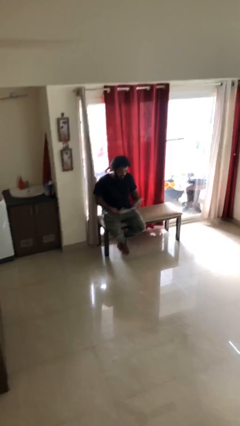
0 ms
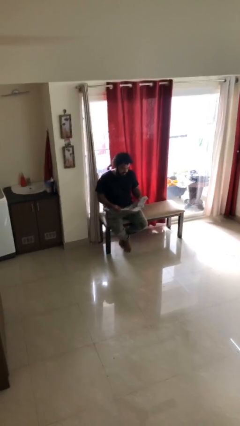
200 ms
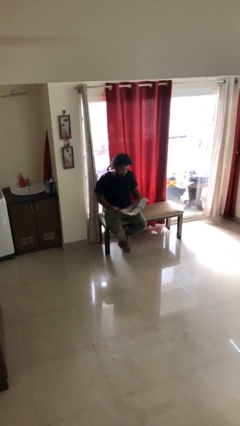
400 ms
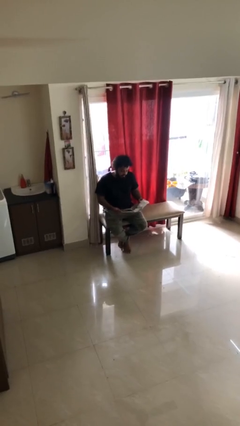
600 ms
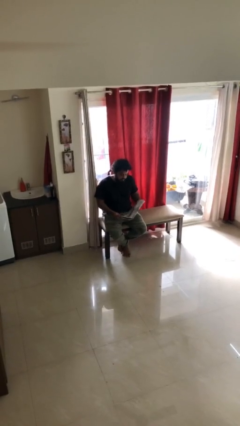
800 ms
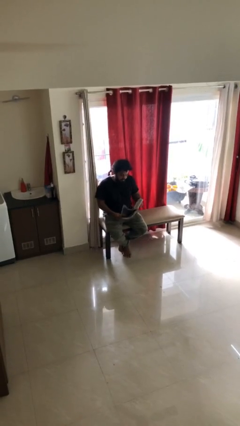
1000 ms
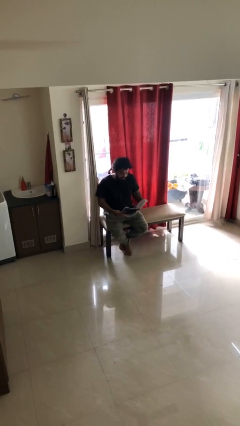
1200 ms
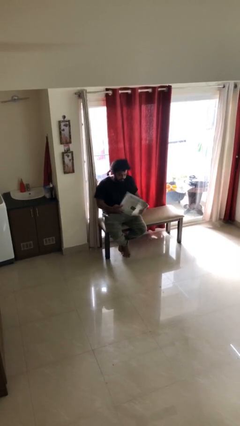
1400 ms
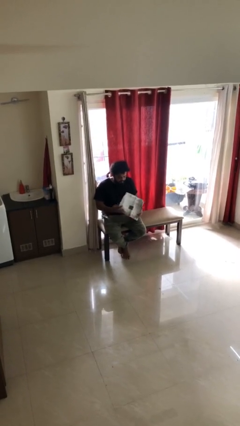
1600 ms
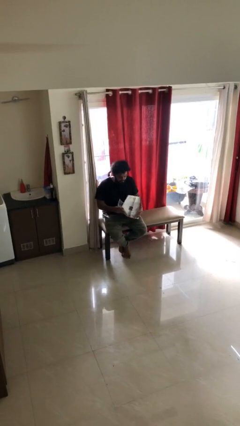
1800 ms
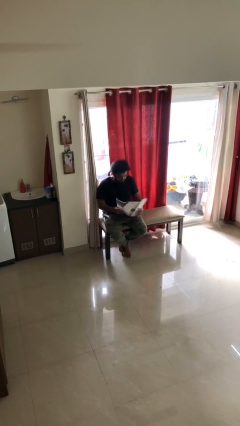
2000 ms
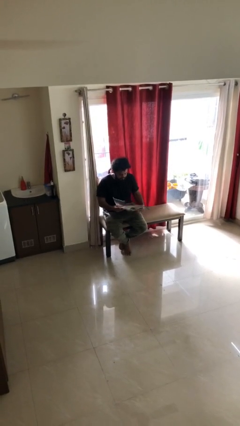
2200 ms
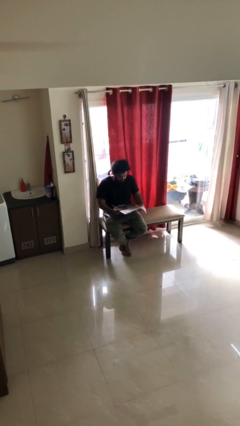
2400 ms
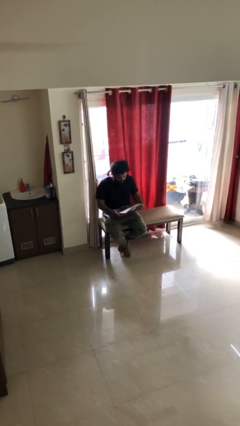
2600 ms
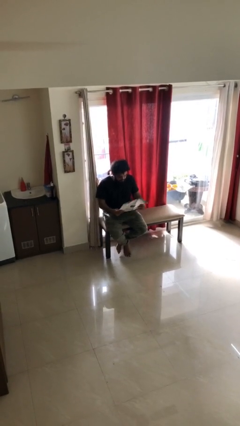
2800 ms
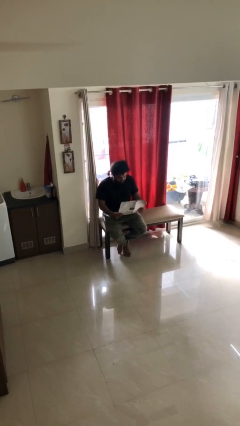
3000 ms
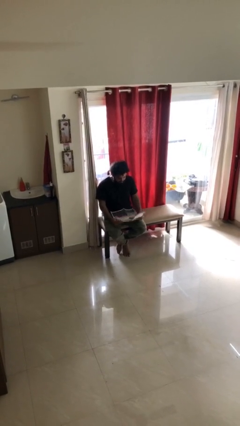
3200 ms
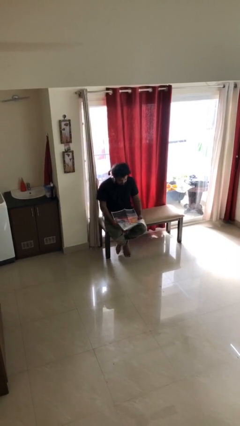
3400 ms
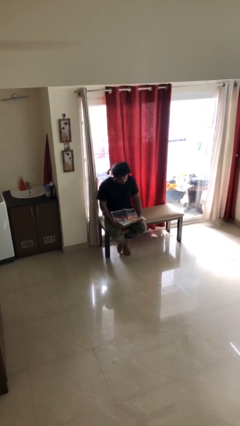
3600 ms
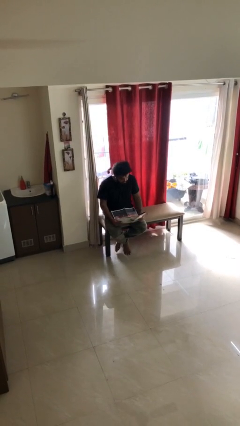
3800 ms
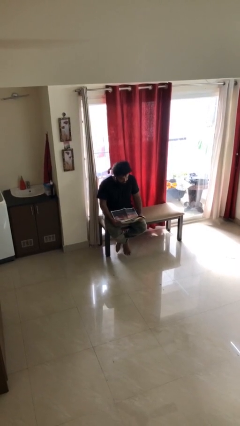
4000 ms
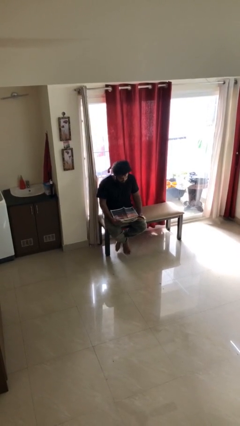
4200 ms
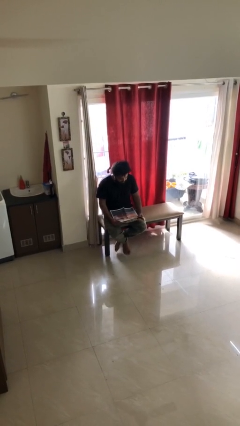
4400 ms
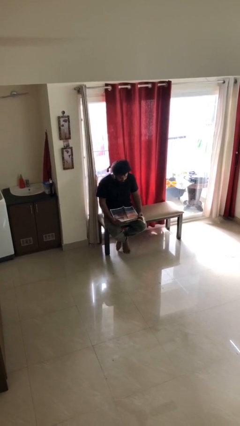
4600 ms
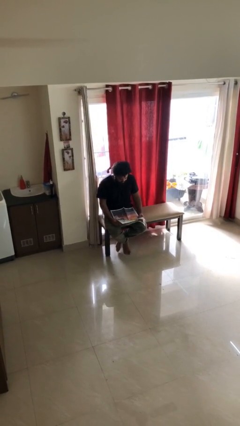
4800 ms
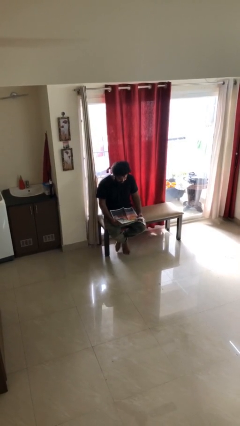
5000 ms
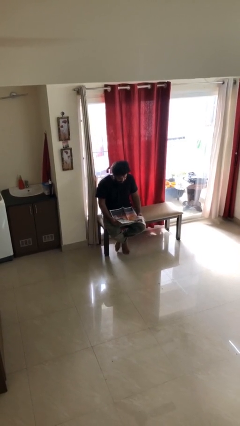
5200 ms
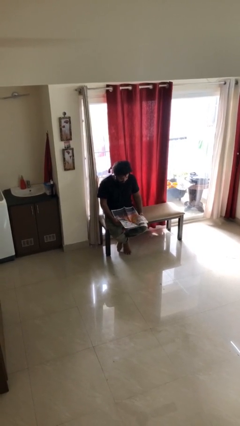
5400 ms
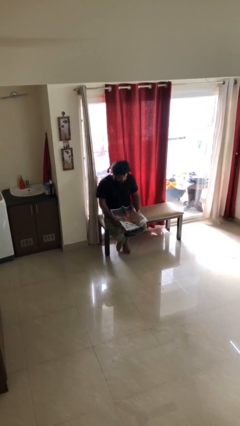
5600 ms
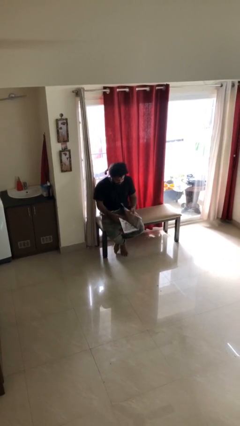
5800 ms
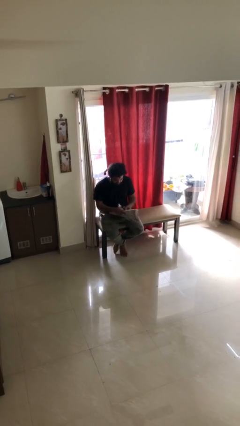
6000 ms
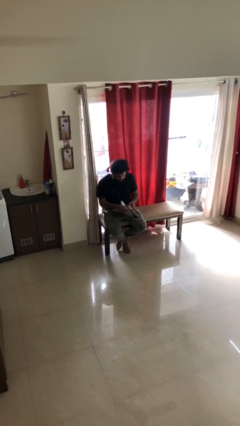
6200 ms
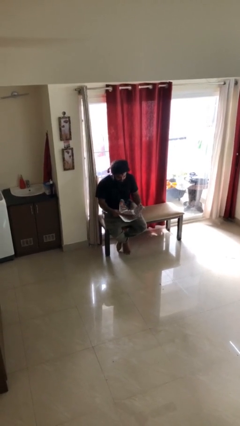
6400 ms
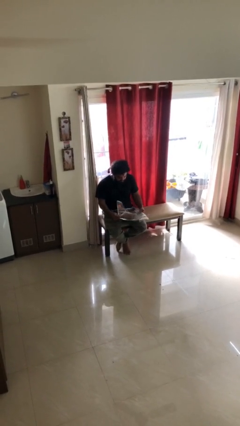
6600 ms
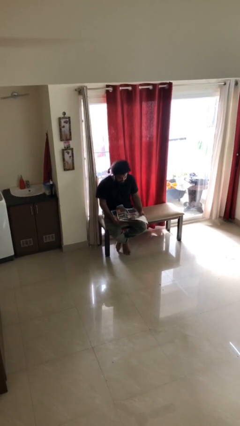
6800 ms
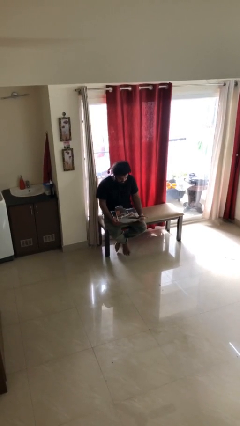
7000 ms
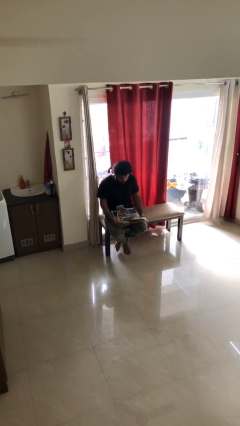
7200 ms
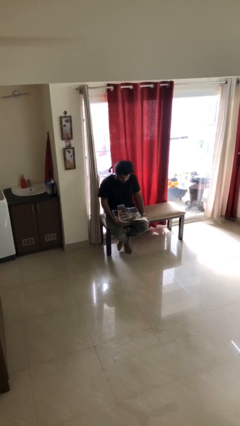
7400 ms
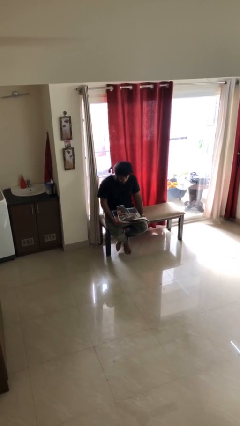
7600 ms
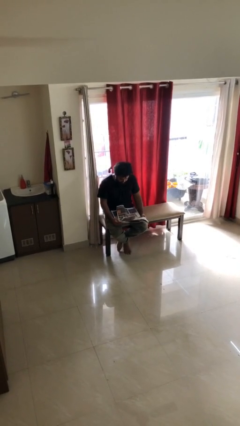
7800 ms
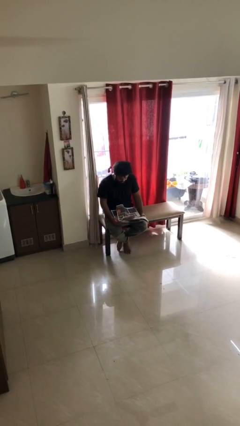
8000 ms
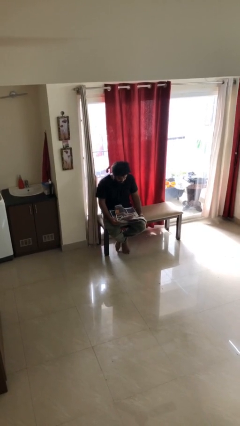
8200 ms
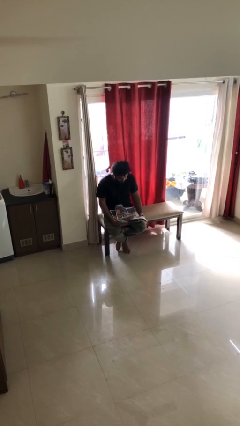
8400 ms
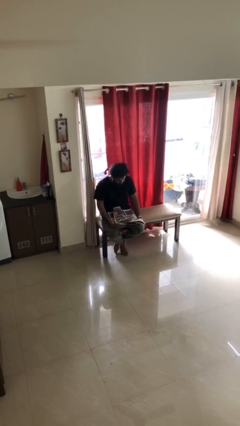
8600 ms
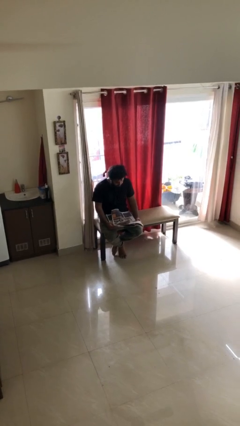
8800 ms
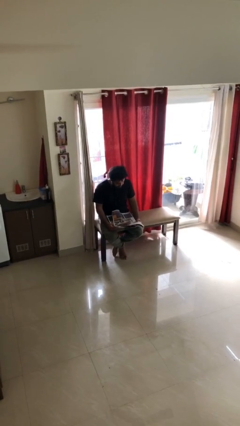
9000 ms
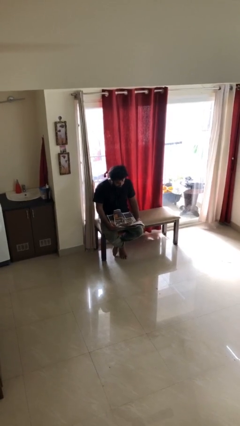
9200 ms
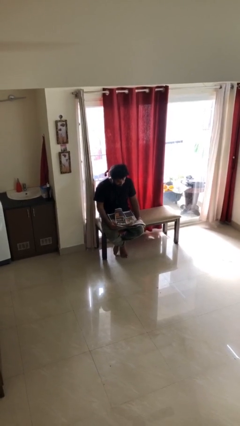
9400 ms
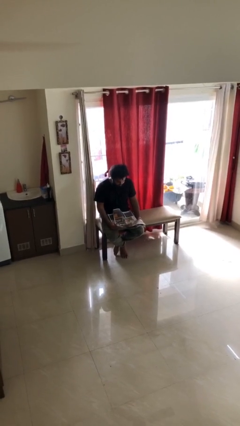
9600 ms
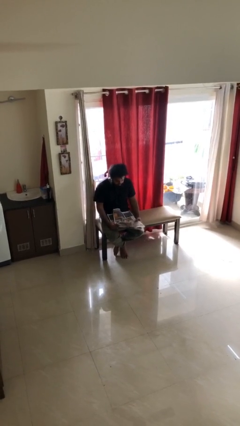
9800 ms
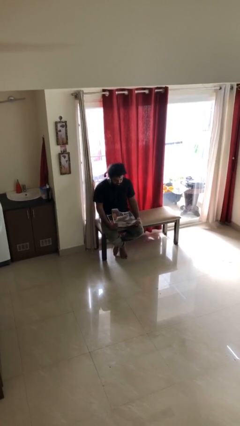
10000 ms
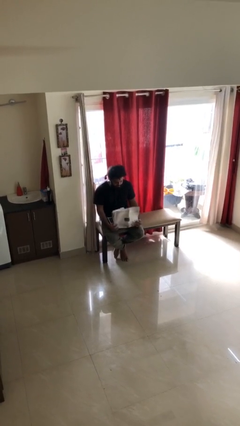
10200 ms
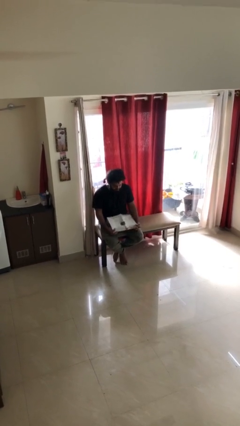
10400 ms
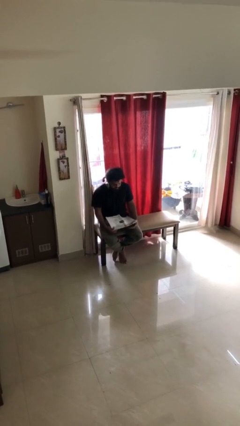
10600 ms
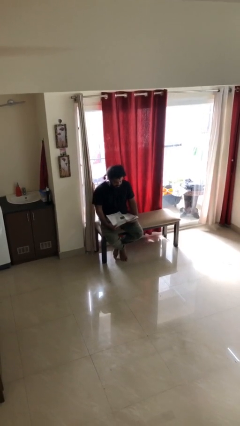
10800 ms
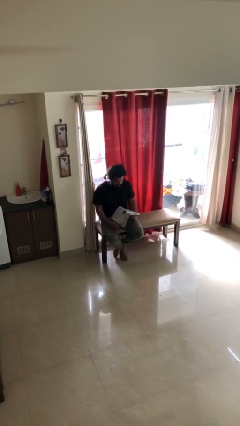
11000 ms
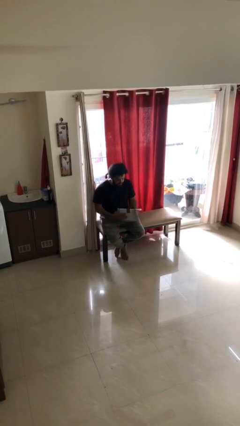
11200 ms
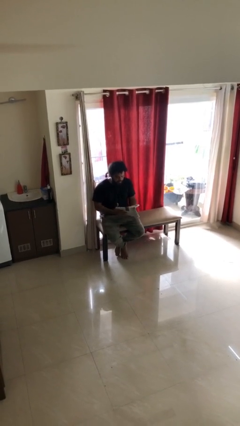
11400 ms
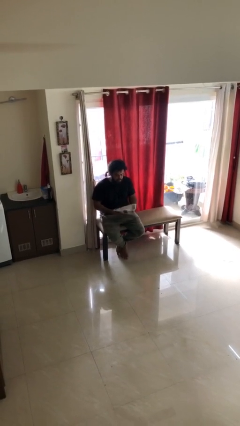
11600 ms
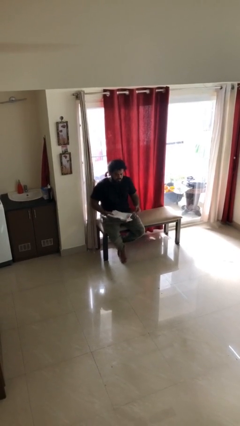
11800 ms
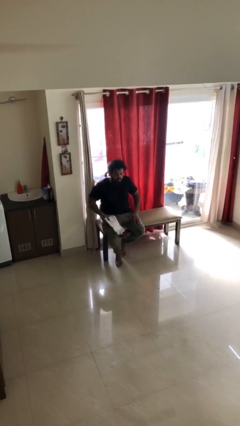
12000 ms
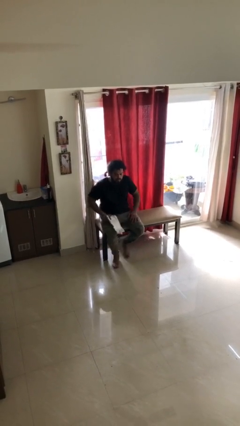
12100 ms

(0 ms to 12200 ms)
person reads document

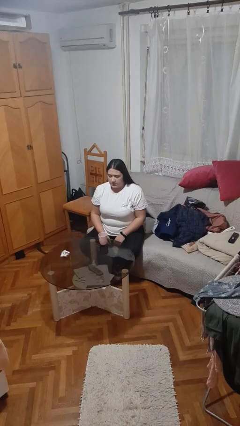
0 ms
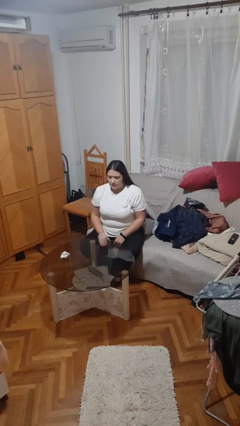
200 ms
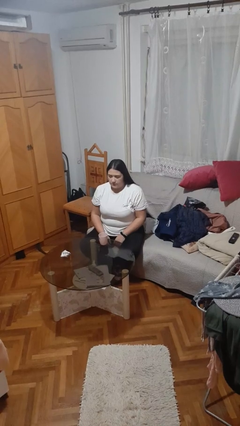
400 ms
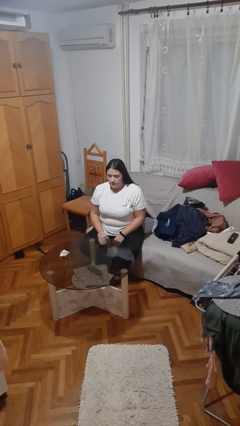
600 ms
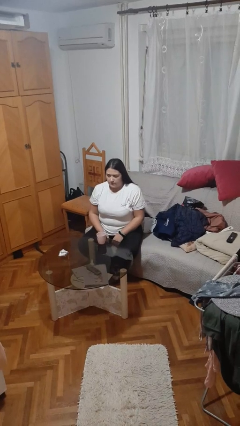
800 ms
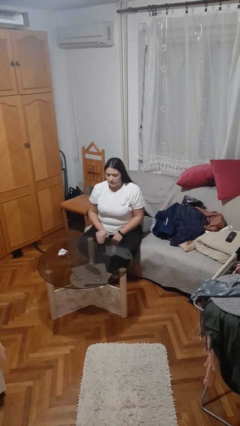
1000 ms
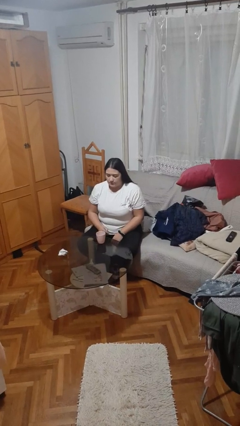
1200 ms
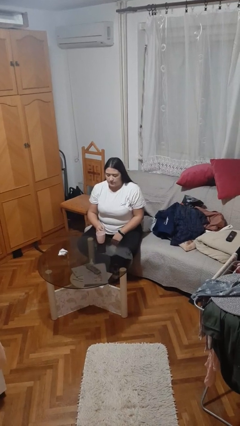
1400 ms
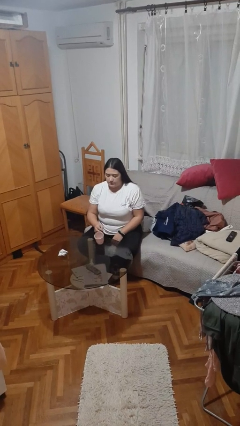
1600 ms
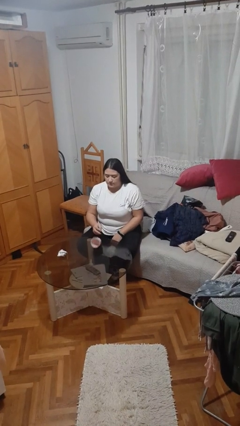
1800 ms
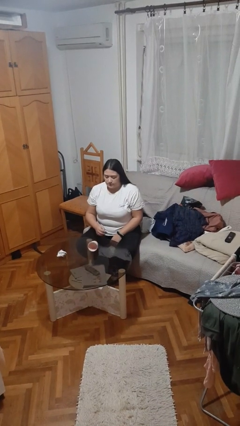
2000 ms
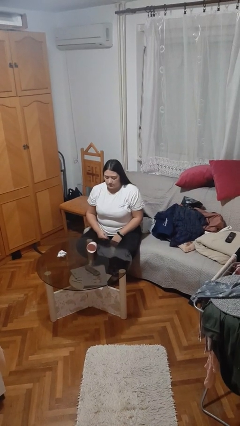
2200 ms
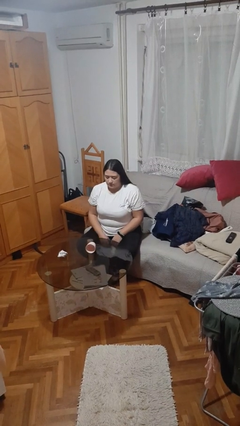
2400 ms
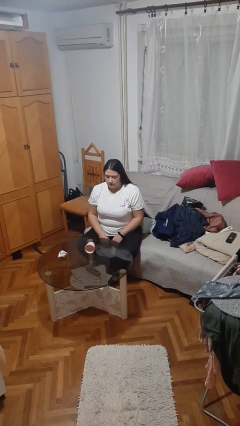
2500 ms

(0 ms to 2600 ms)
person spills on table

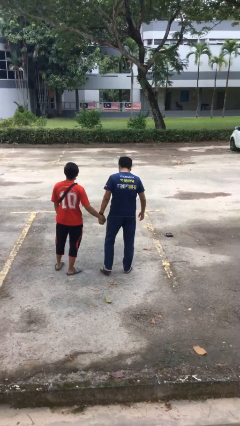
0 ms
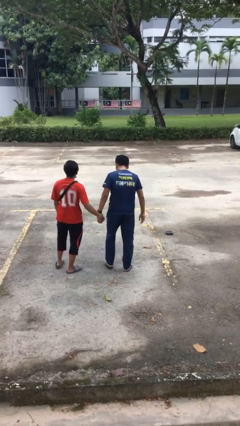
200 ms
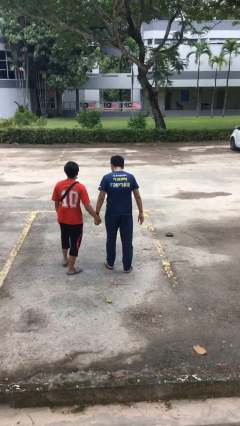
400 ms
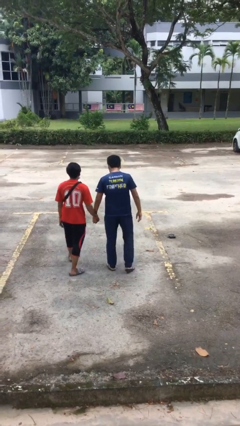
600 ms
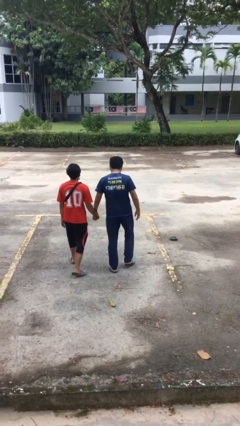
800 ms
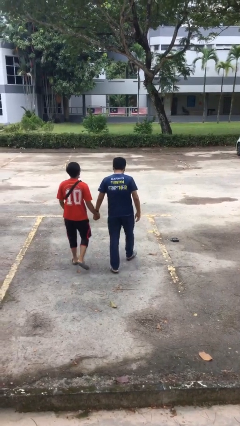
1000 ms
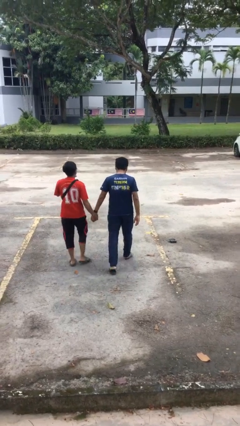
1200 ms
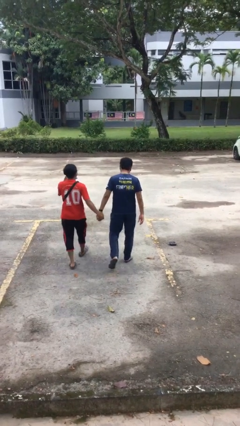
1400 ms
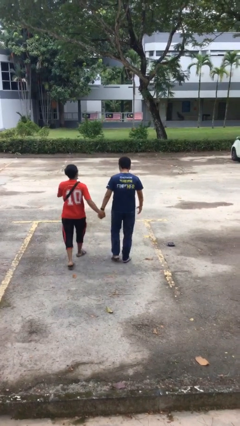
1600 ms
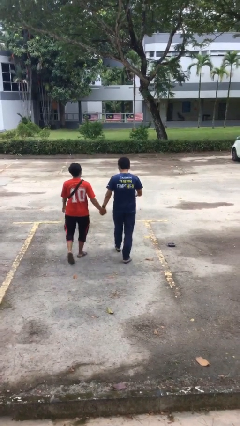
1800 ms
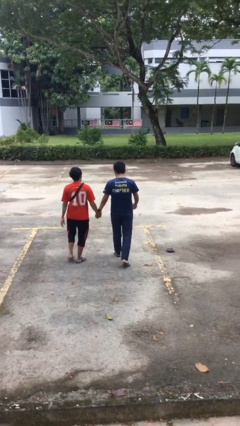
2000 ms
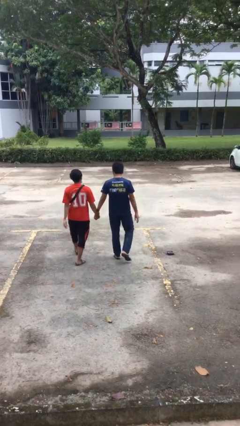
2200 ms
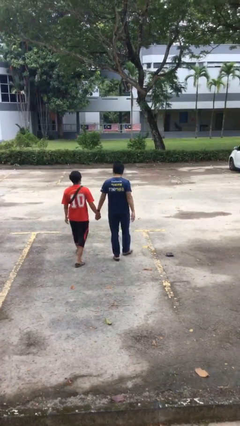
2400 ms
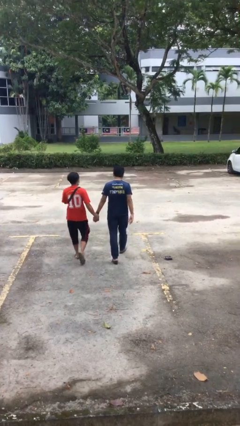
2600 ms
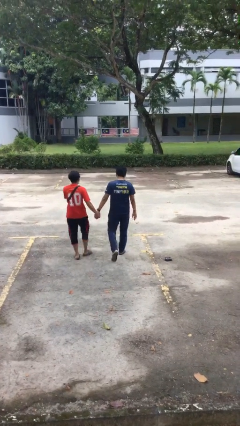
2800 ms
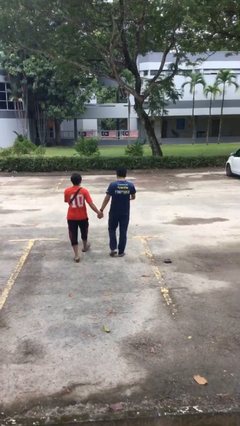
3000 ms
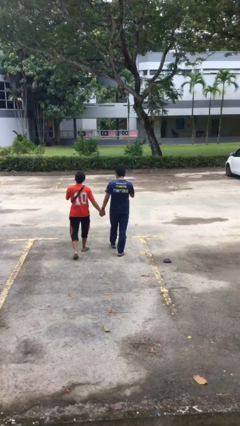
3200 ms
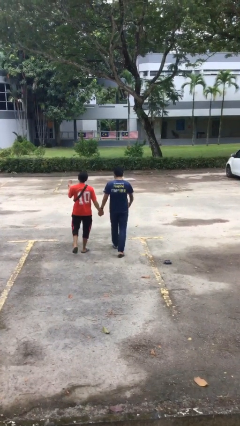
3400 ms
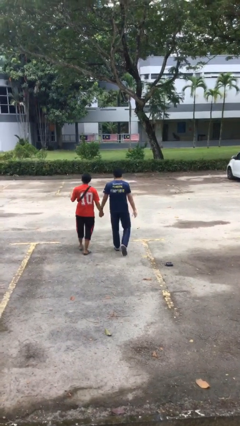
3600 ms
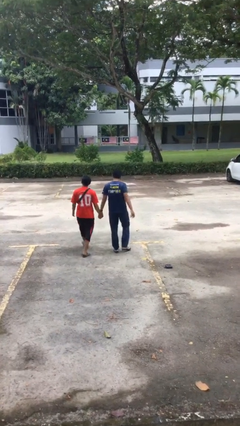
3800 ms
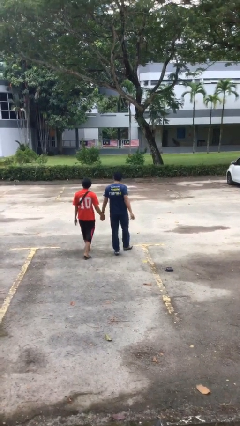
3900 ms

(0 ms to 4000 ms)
person holds hand
